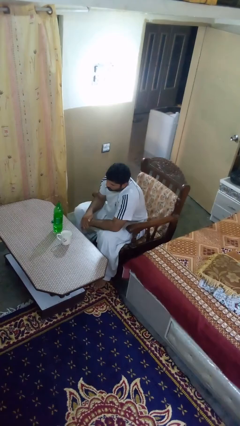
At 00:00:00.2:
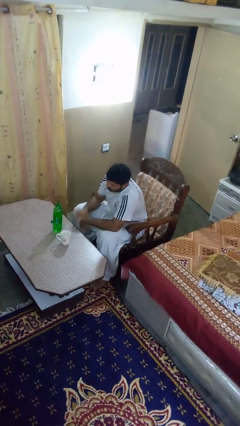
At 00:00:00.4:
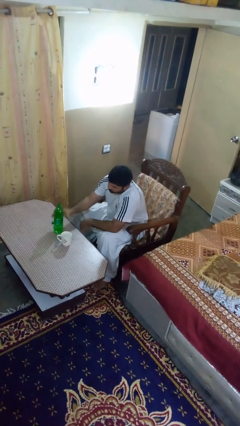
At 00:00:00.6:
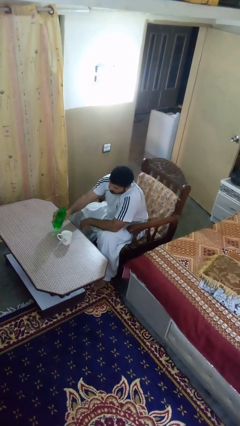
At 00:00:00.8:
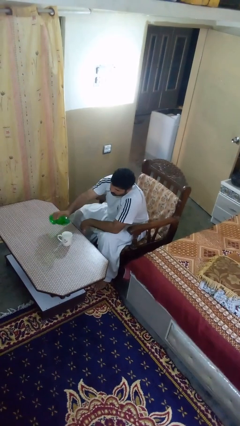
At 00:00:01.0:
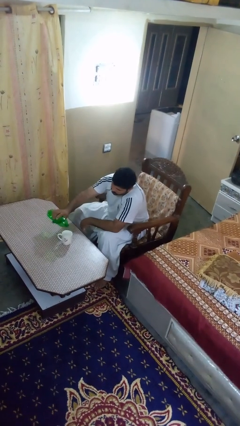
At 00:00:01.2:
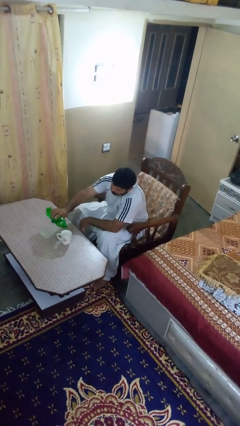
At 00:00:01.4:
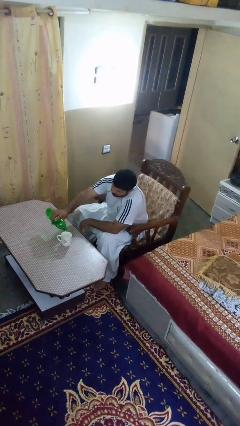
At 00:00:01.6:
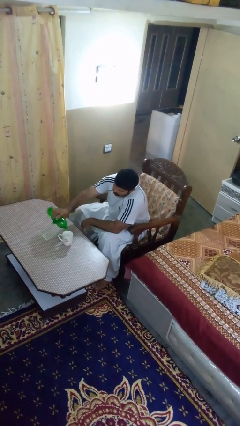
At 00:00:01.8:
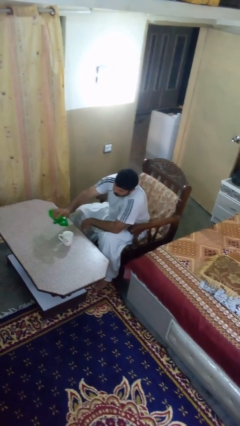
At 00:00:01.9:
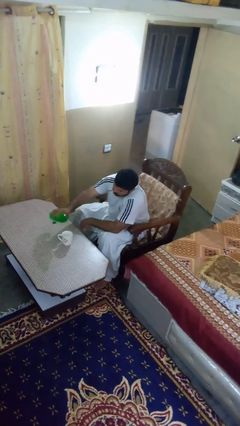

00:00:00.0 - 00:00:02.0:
person pours liquid into cup

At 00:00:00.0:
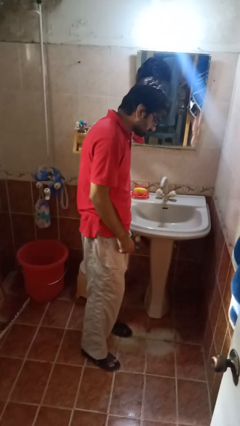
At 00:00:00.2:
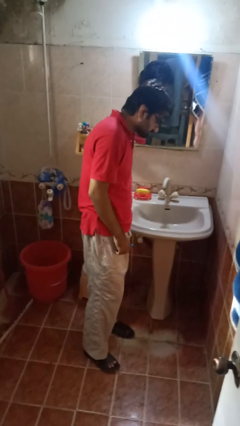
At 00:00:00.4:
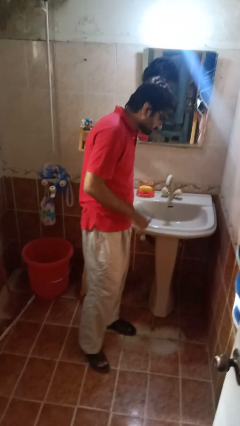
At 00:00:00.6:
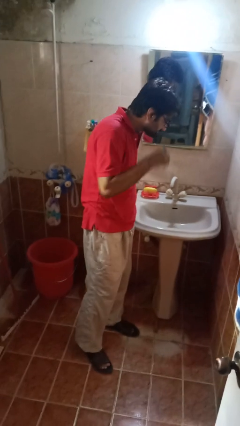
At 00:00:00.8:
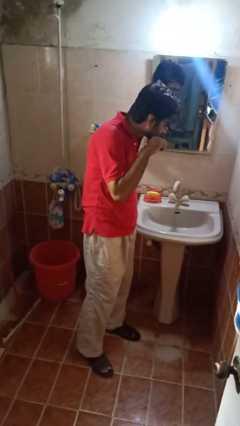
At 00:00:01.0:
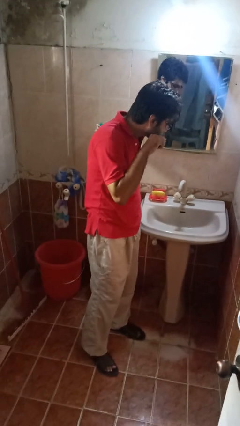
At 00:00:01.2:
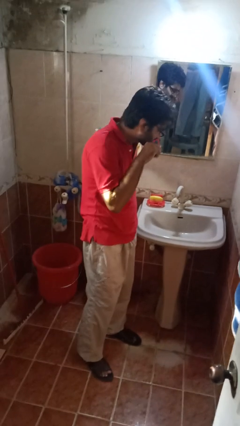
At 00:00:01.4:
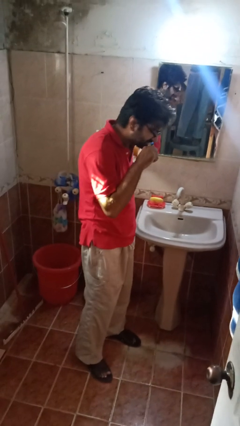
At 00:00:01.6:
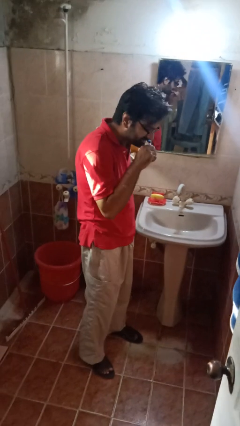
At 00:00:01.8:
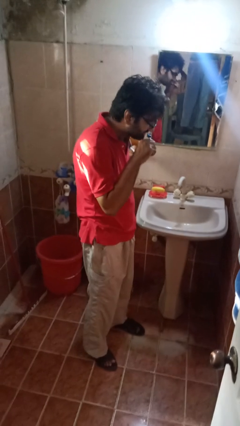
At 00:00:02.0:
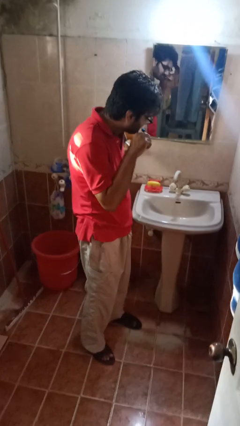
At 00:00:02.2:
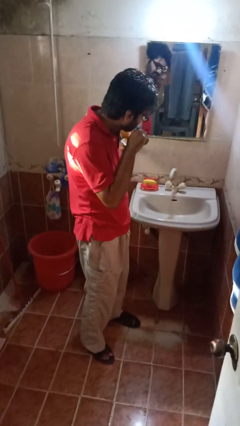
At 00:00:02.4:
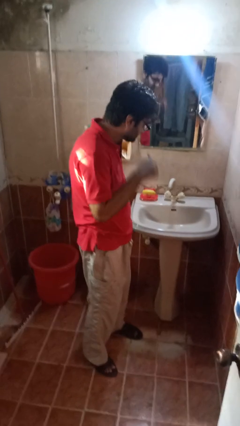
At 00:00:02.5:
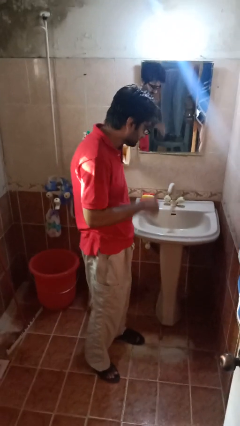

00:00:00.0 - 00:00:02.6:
person brushes teeth

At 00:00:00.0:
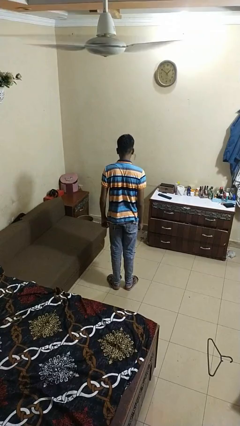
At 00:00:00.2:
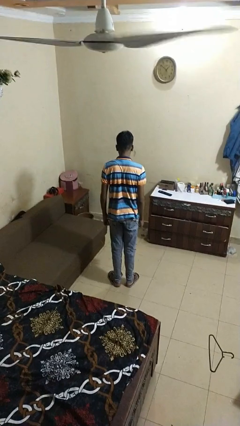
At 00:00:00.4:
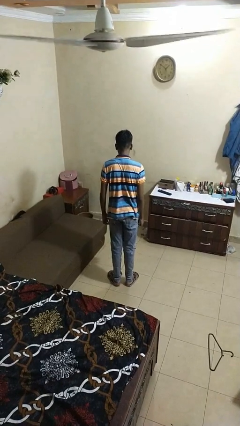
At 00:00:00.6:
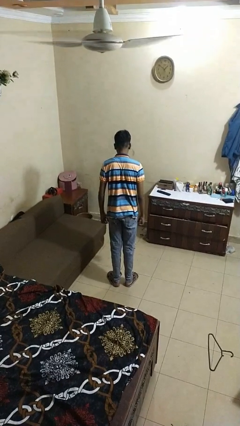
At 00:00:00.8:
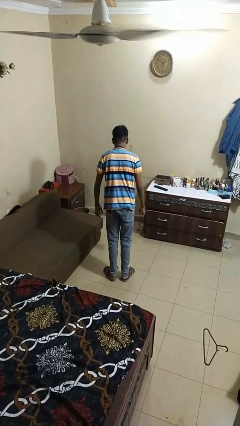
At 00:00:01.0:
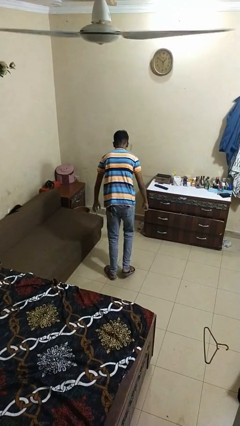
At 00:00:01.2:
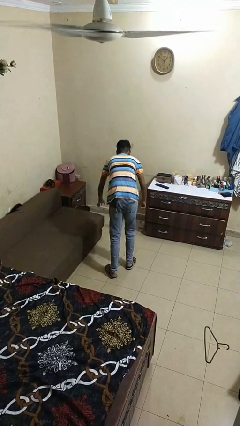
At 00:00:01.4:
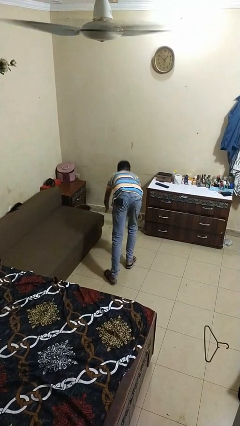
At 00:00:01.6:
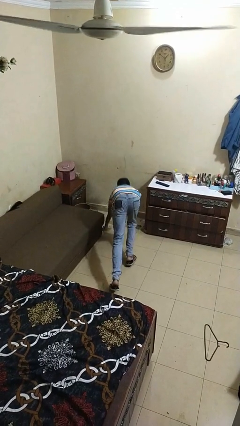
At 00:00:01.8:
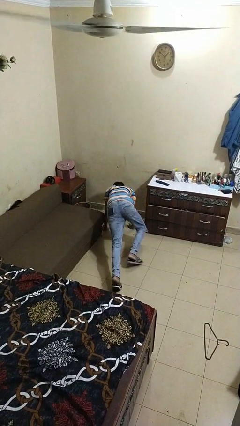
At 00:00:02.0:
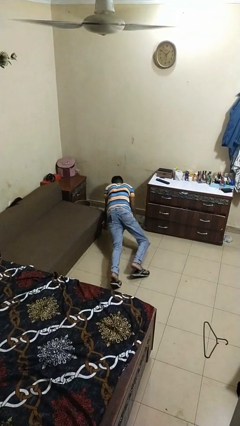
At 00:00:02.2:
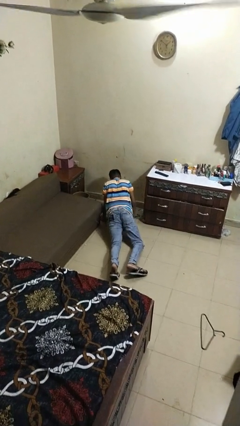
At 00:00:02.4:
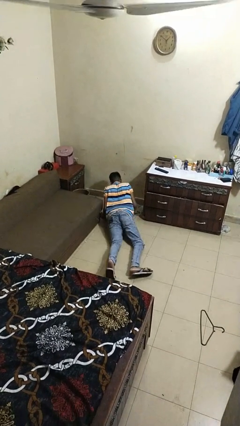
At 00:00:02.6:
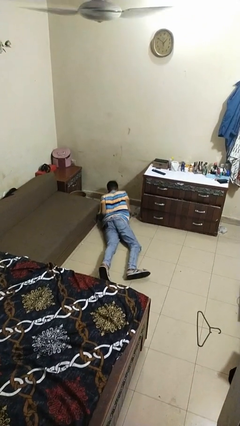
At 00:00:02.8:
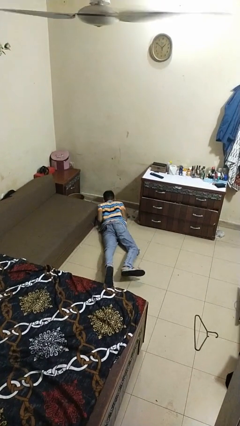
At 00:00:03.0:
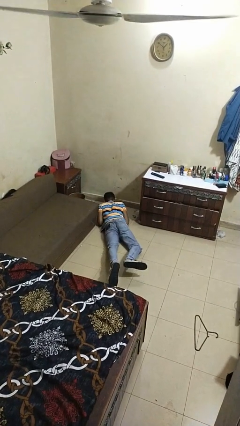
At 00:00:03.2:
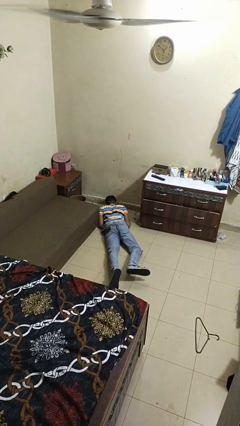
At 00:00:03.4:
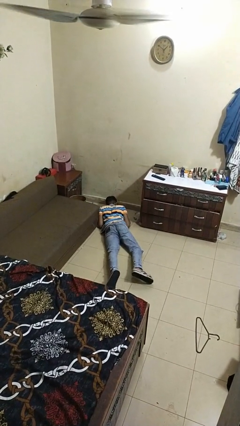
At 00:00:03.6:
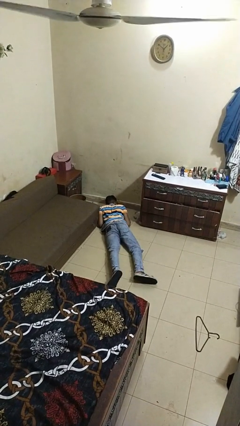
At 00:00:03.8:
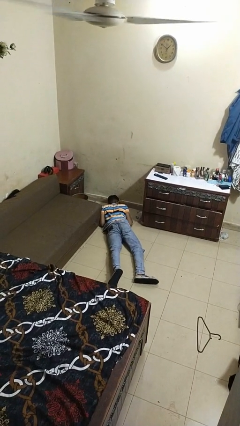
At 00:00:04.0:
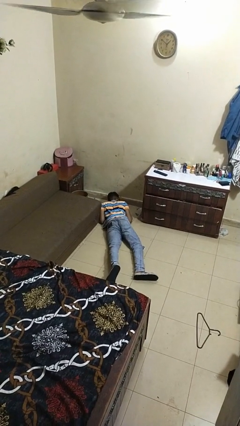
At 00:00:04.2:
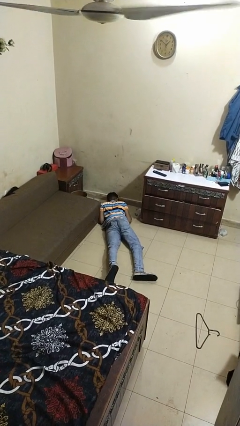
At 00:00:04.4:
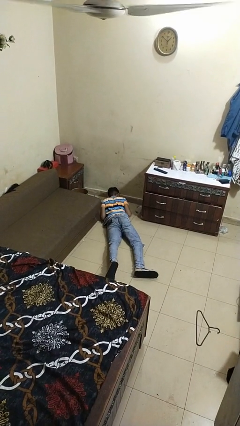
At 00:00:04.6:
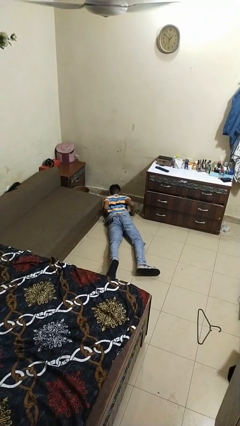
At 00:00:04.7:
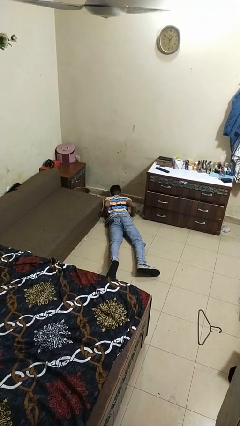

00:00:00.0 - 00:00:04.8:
person trips on object on floor

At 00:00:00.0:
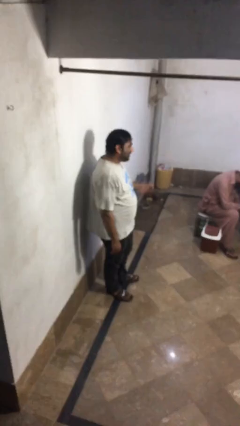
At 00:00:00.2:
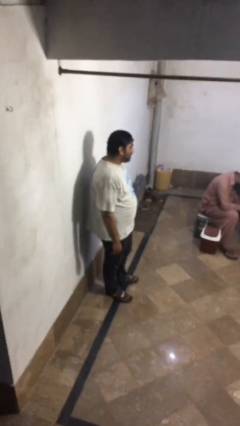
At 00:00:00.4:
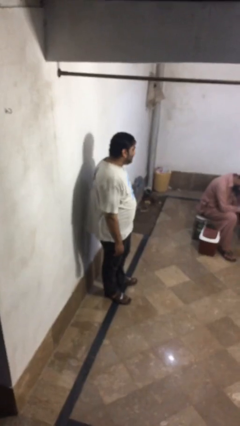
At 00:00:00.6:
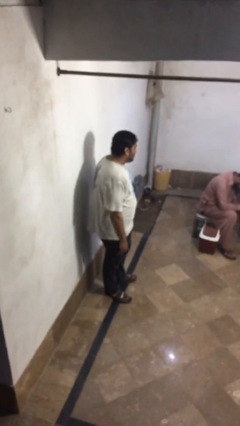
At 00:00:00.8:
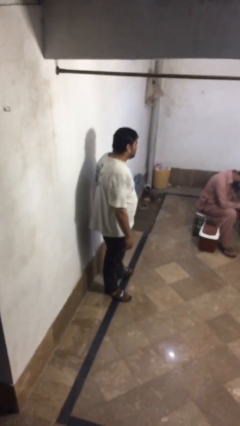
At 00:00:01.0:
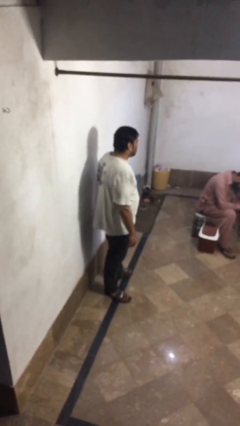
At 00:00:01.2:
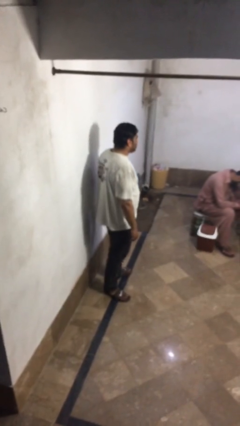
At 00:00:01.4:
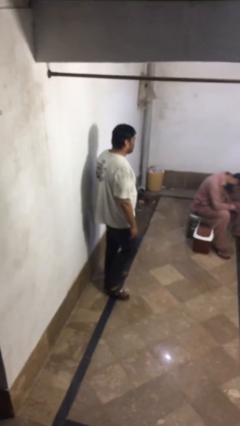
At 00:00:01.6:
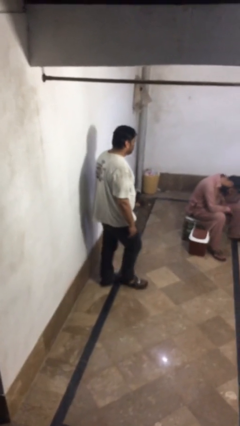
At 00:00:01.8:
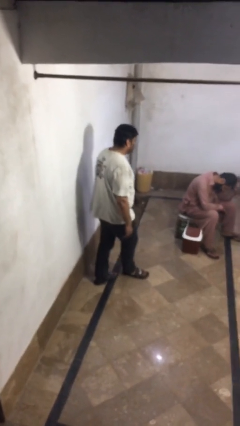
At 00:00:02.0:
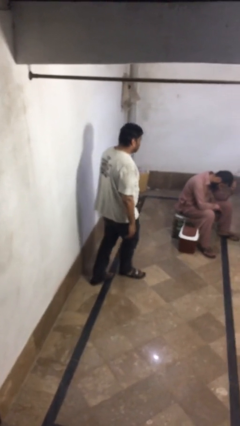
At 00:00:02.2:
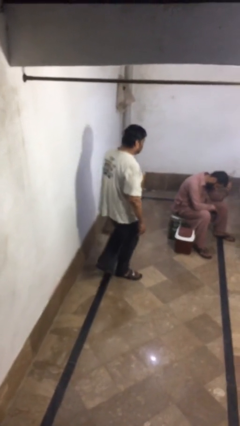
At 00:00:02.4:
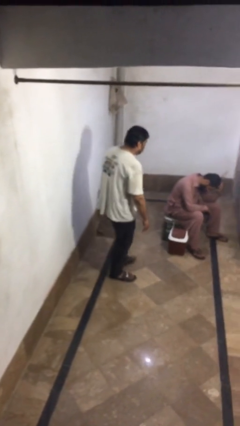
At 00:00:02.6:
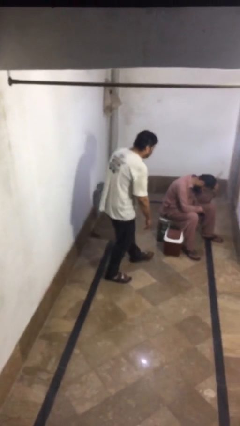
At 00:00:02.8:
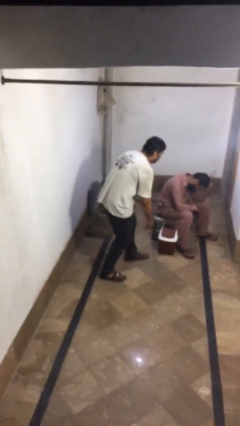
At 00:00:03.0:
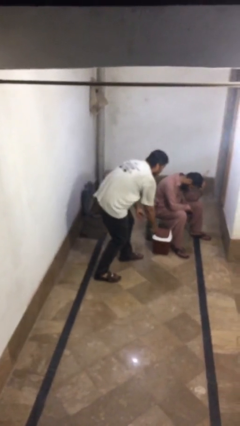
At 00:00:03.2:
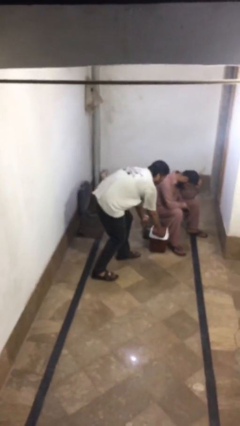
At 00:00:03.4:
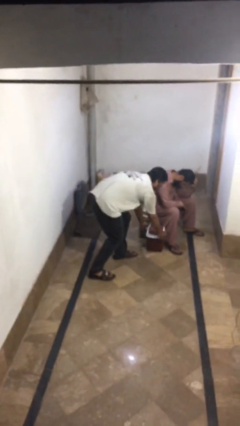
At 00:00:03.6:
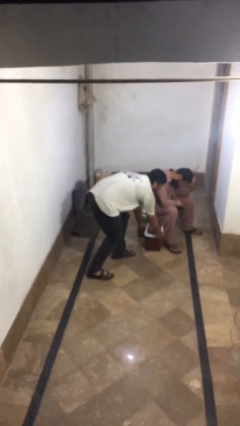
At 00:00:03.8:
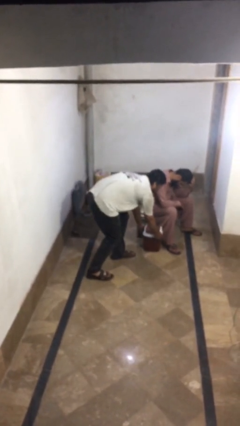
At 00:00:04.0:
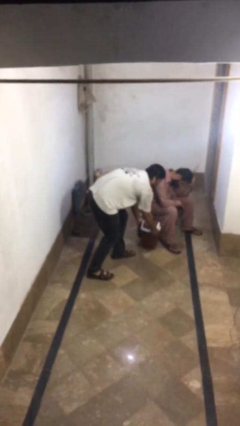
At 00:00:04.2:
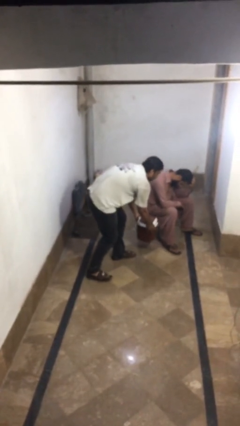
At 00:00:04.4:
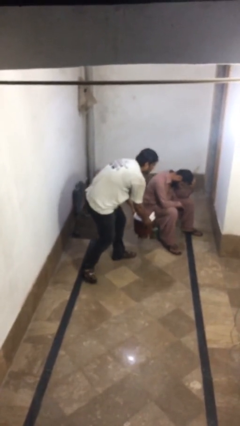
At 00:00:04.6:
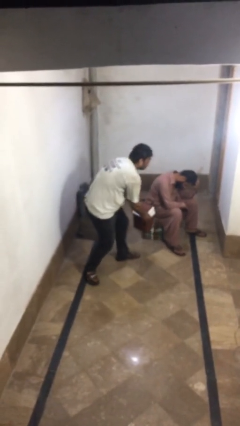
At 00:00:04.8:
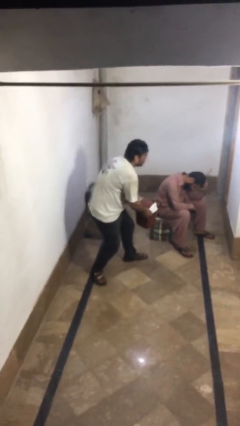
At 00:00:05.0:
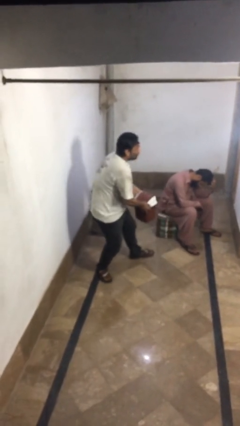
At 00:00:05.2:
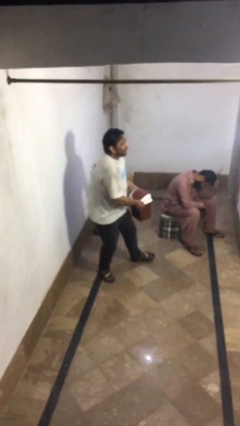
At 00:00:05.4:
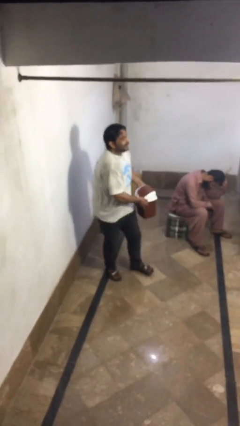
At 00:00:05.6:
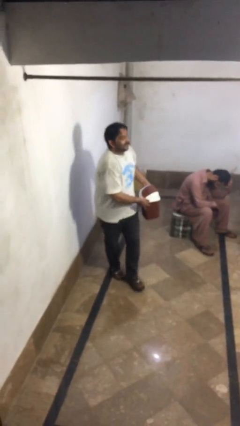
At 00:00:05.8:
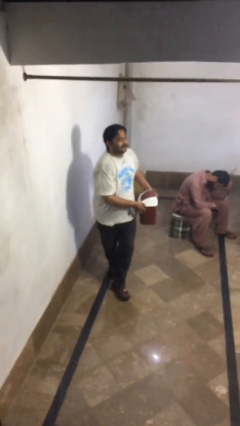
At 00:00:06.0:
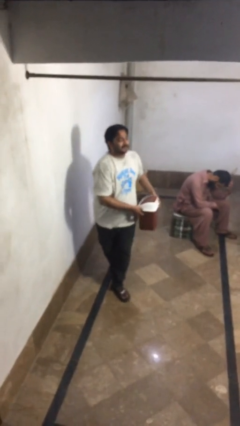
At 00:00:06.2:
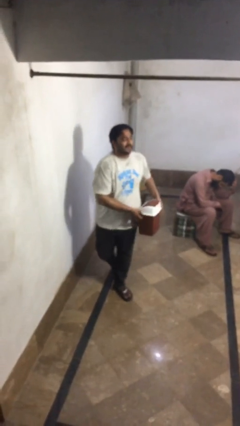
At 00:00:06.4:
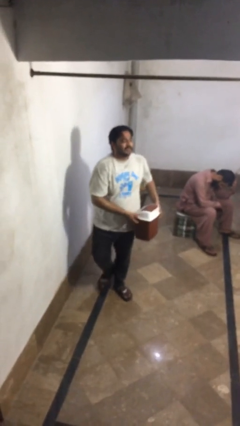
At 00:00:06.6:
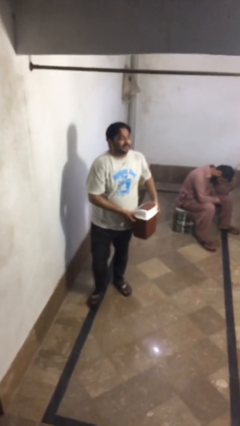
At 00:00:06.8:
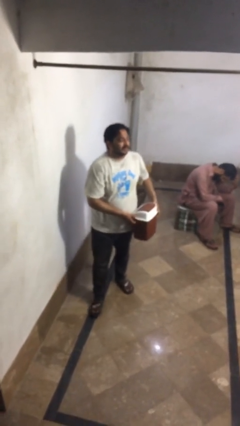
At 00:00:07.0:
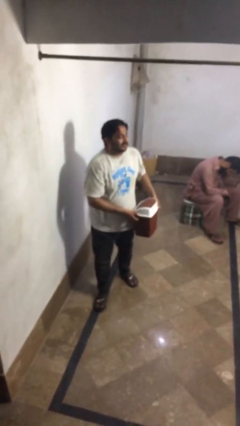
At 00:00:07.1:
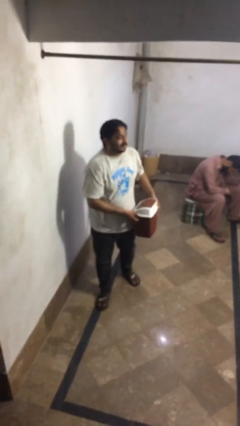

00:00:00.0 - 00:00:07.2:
person steals object from person

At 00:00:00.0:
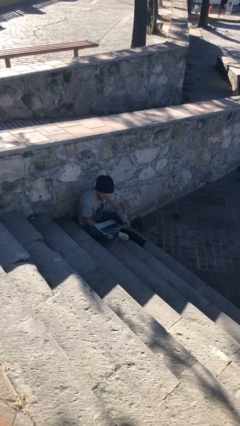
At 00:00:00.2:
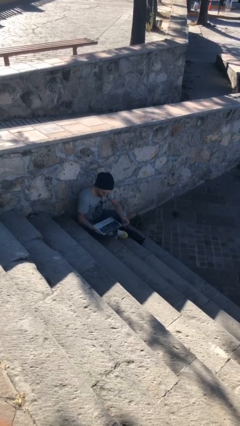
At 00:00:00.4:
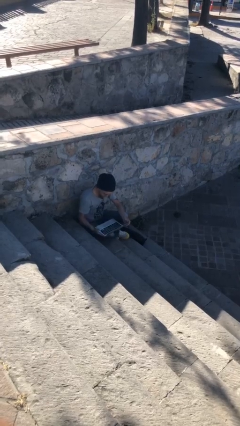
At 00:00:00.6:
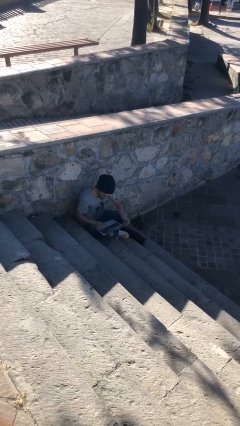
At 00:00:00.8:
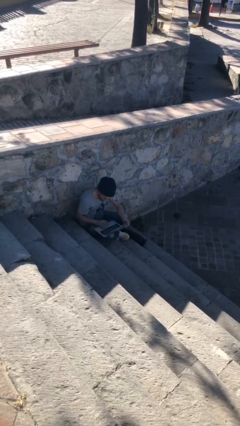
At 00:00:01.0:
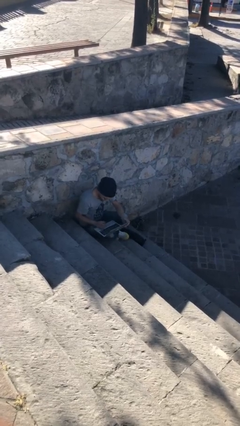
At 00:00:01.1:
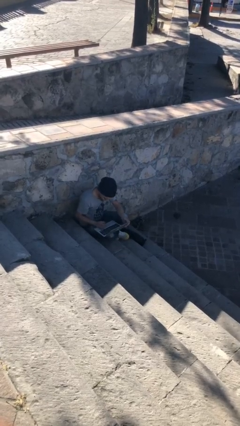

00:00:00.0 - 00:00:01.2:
person interacts with laptop
